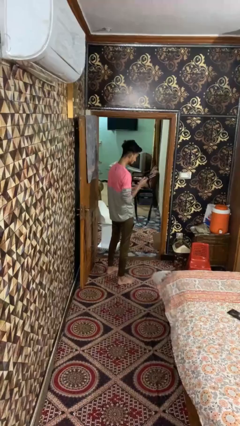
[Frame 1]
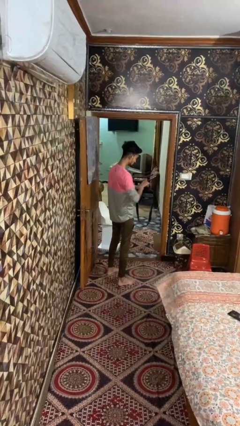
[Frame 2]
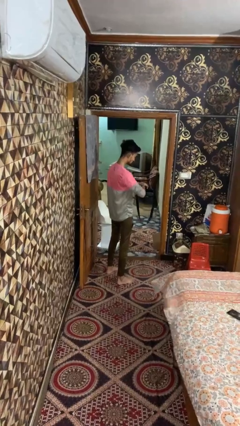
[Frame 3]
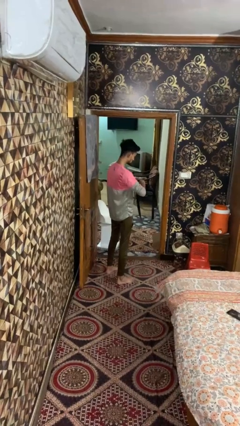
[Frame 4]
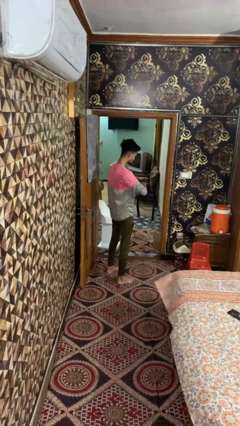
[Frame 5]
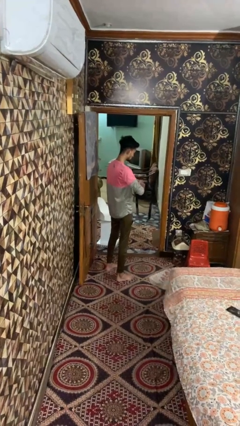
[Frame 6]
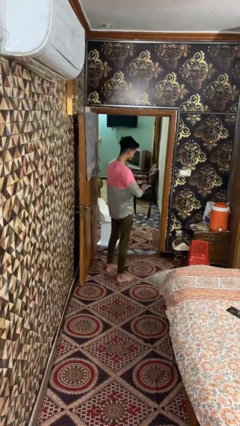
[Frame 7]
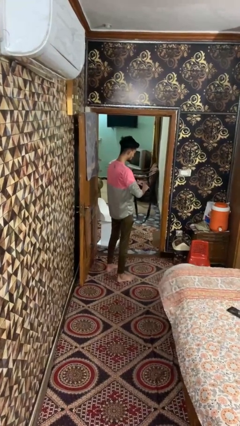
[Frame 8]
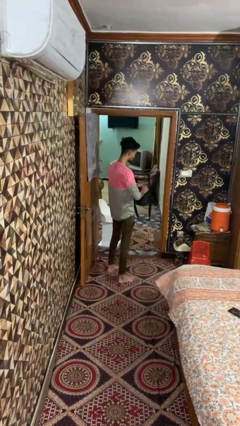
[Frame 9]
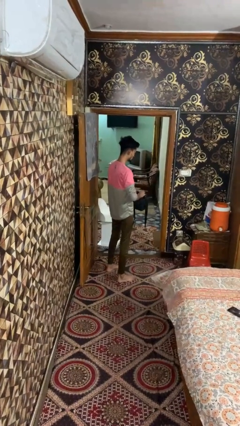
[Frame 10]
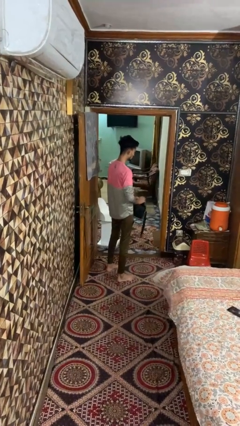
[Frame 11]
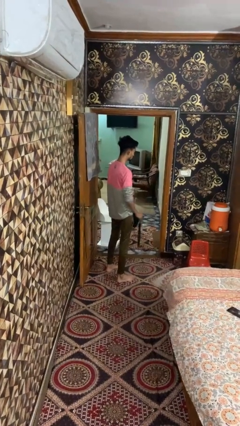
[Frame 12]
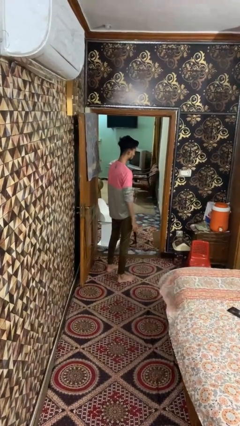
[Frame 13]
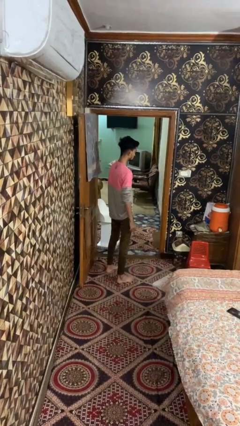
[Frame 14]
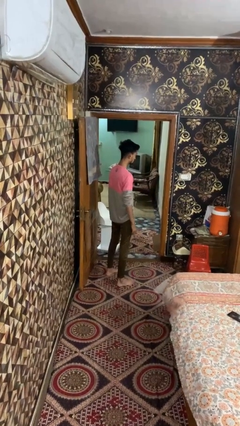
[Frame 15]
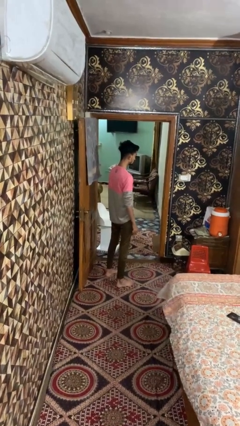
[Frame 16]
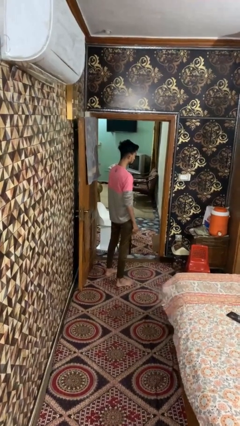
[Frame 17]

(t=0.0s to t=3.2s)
person puts object into bag

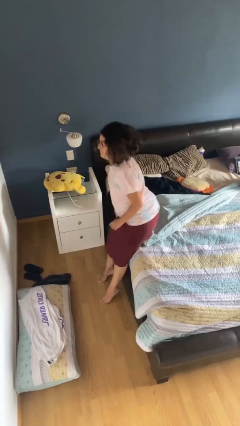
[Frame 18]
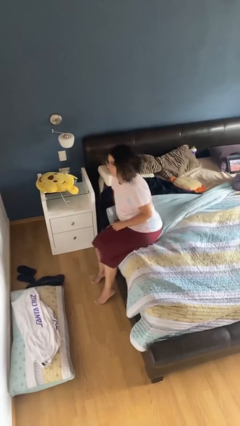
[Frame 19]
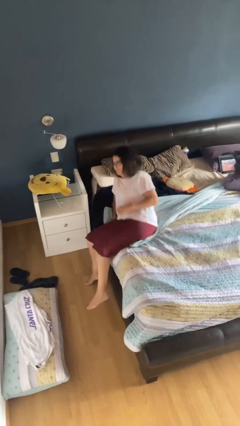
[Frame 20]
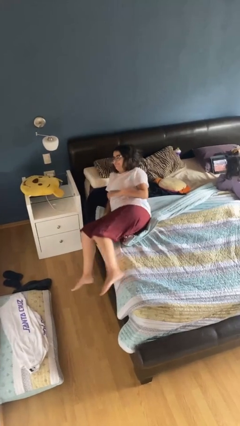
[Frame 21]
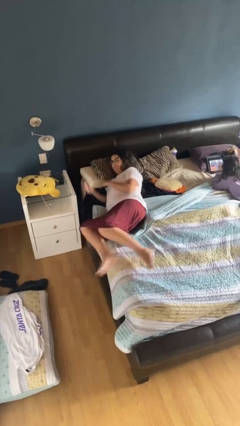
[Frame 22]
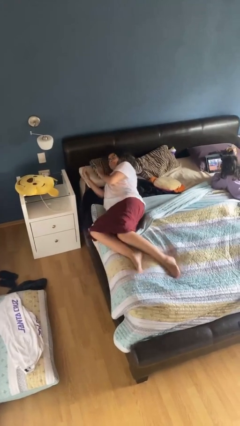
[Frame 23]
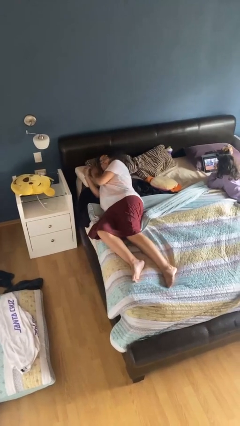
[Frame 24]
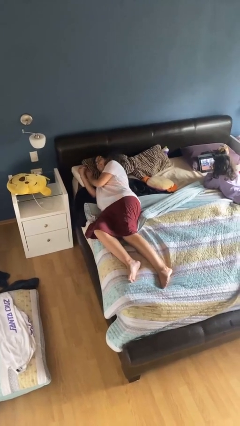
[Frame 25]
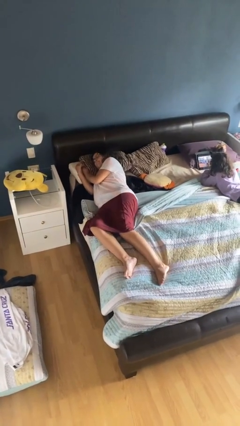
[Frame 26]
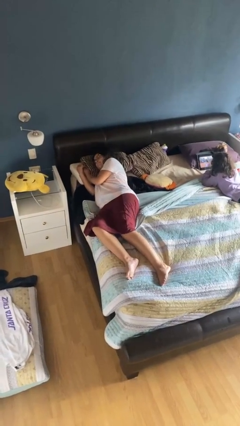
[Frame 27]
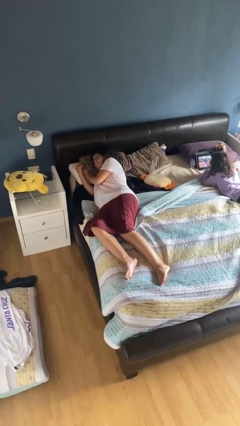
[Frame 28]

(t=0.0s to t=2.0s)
person lies down on bed

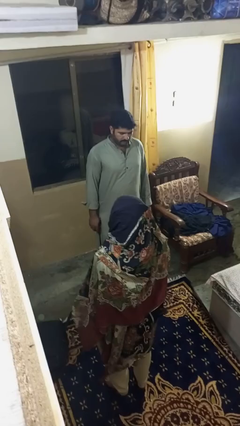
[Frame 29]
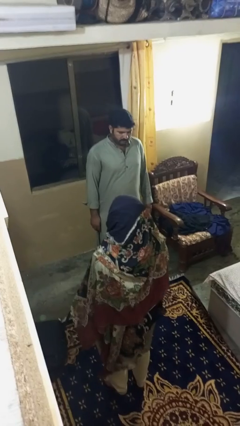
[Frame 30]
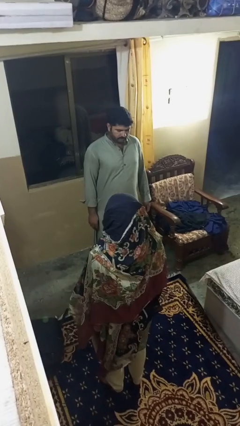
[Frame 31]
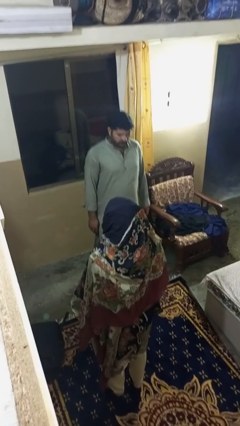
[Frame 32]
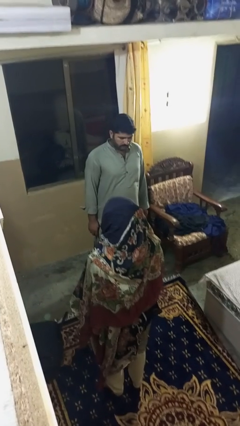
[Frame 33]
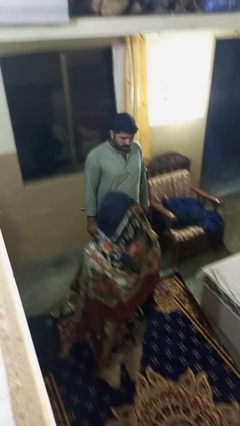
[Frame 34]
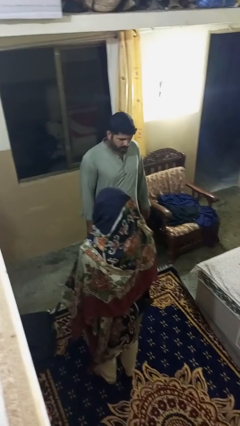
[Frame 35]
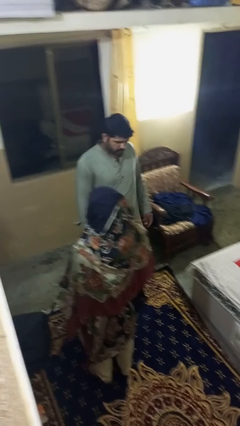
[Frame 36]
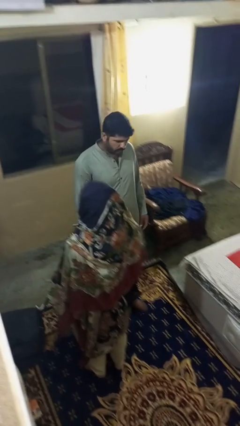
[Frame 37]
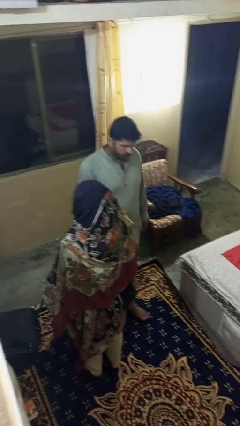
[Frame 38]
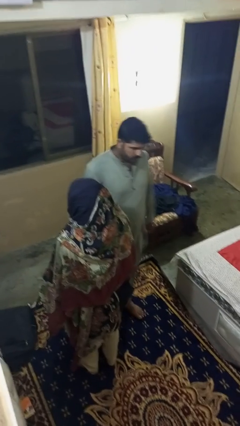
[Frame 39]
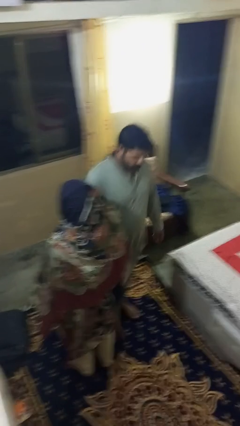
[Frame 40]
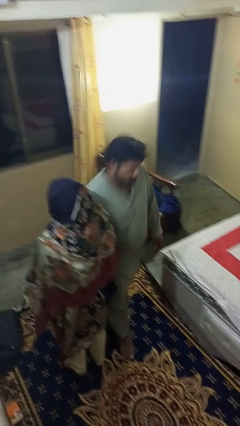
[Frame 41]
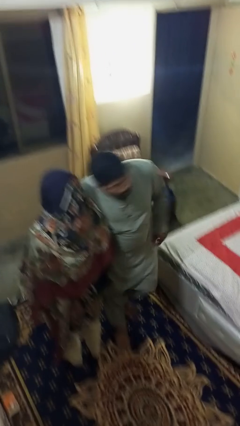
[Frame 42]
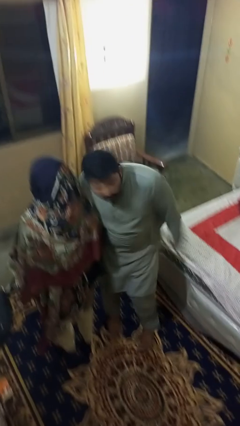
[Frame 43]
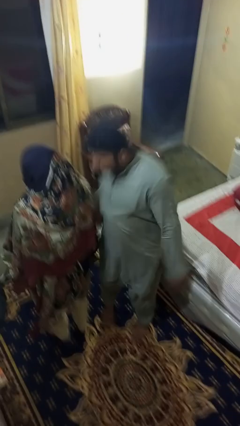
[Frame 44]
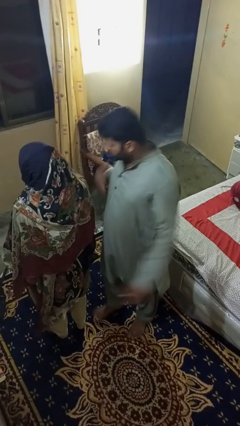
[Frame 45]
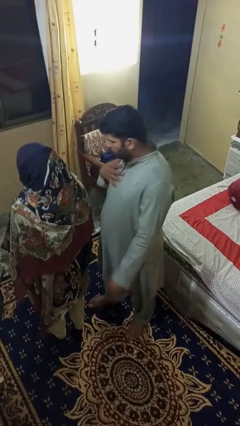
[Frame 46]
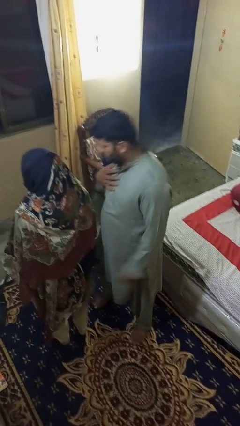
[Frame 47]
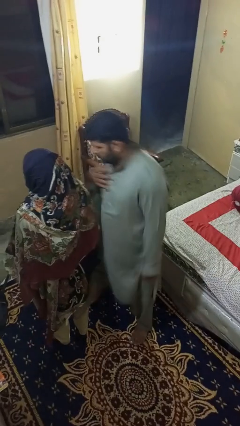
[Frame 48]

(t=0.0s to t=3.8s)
person bumps into person

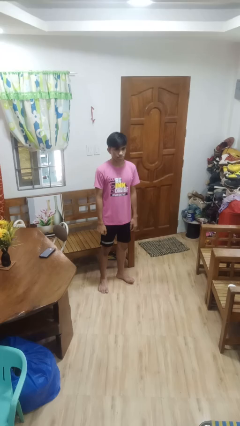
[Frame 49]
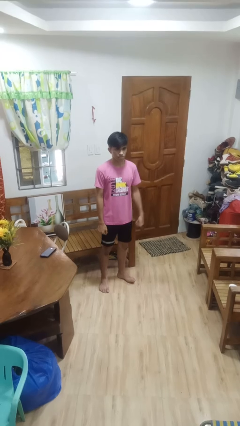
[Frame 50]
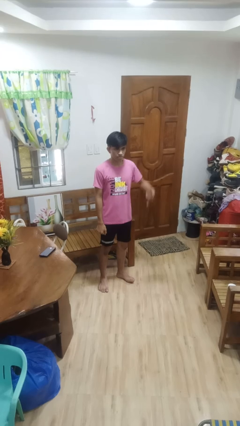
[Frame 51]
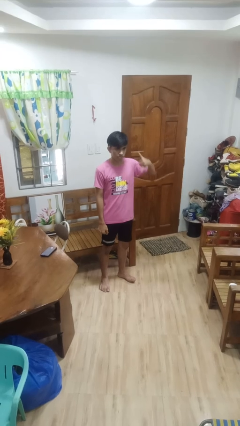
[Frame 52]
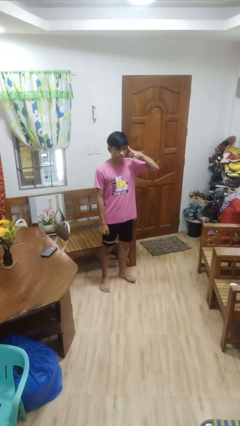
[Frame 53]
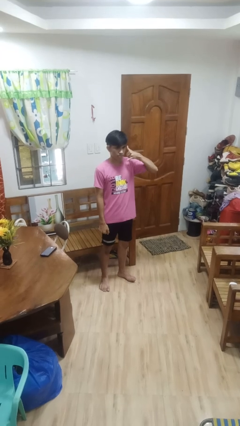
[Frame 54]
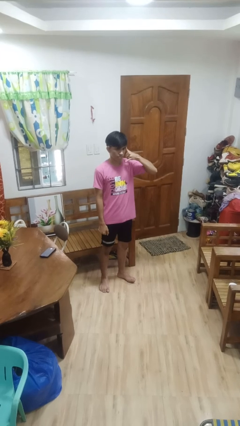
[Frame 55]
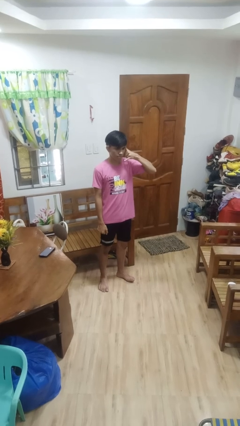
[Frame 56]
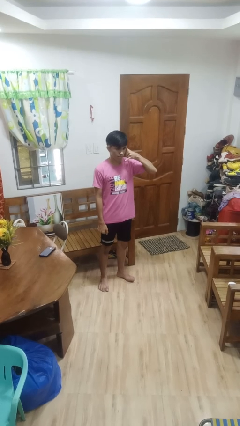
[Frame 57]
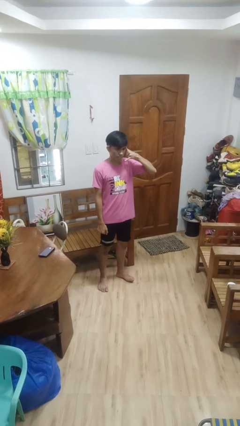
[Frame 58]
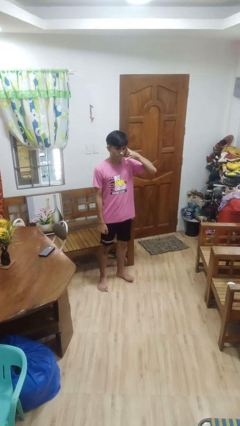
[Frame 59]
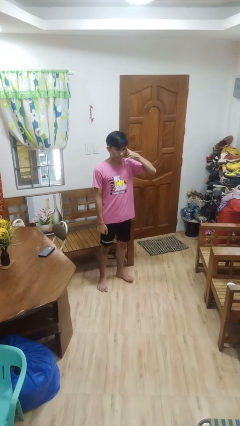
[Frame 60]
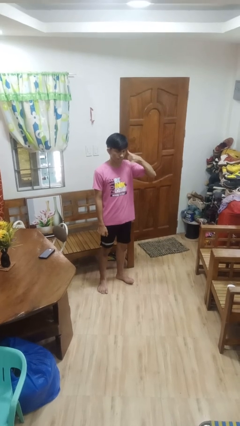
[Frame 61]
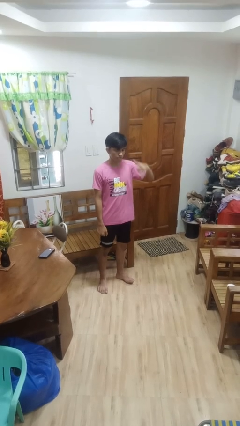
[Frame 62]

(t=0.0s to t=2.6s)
person gestures call me

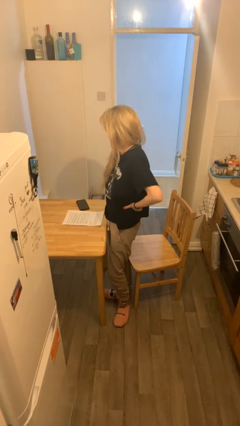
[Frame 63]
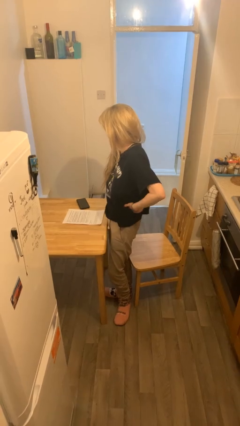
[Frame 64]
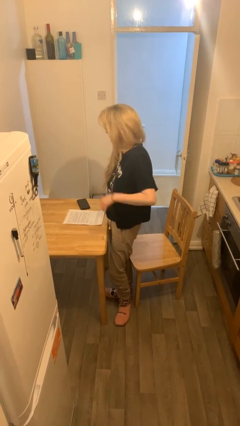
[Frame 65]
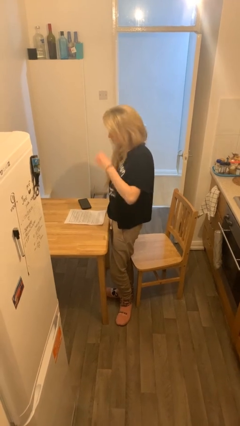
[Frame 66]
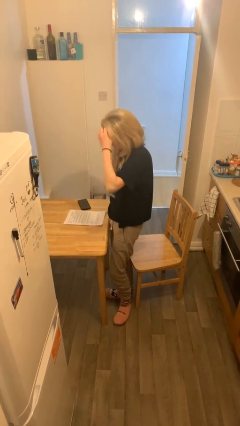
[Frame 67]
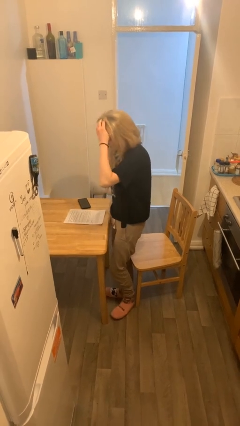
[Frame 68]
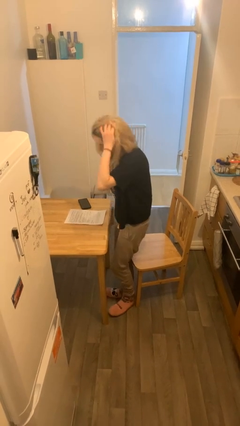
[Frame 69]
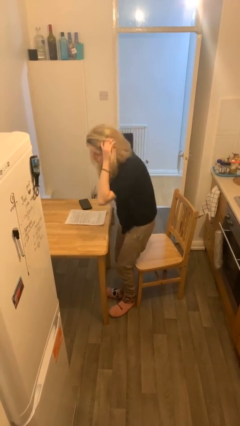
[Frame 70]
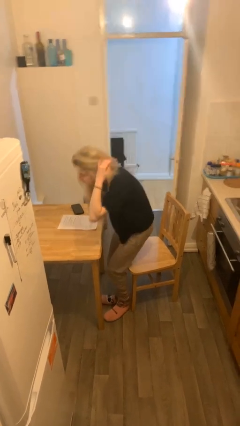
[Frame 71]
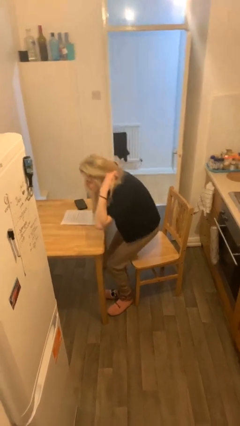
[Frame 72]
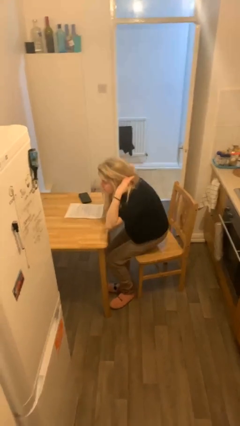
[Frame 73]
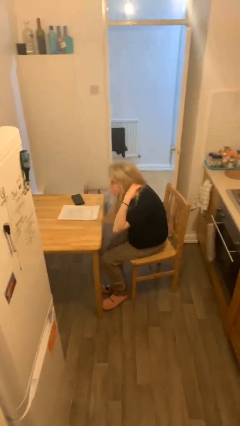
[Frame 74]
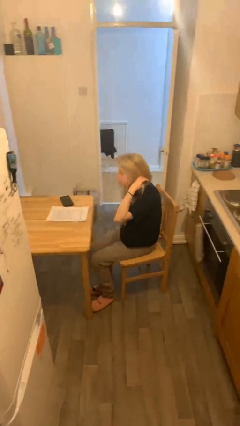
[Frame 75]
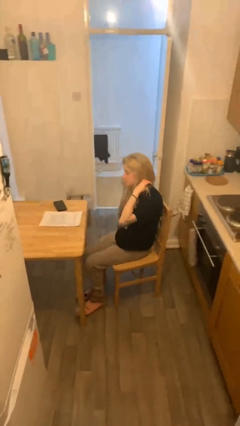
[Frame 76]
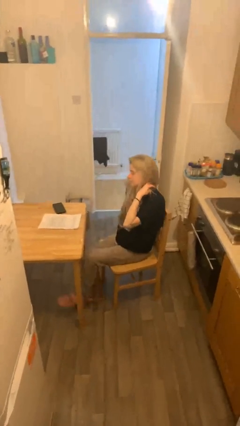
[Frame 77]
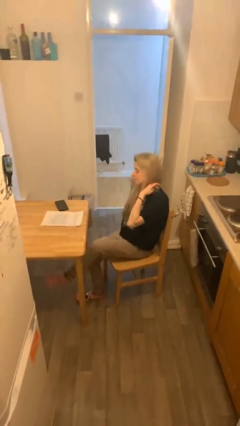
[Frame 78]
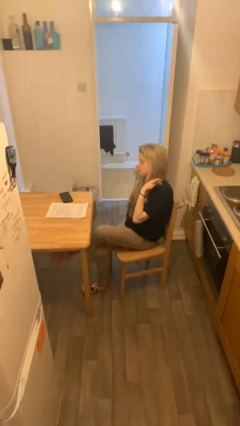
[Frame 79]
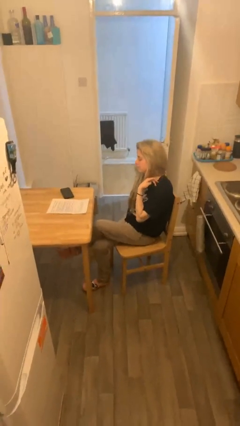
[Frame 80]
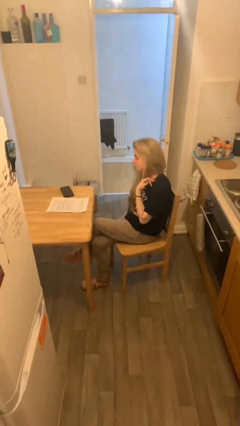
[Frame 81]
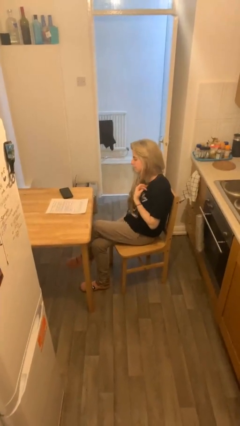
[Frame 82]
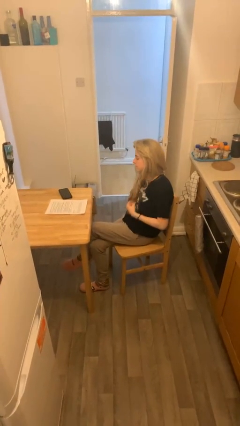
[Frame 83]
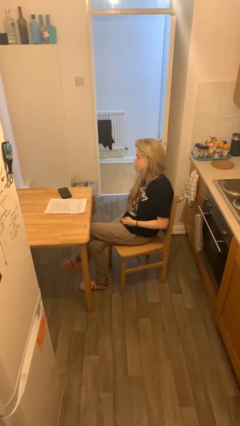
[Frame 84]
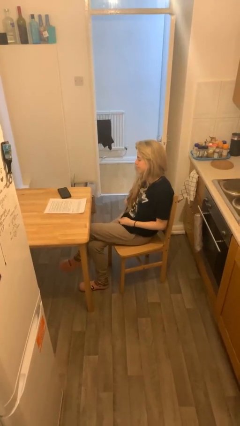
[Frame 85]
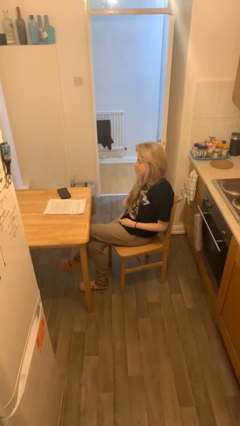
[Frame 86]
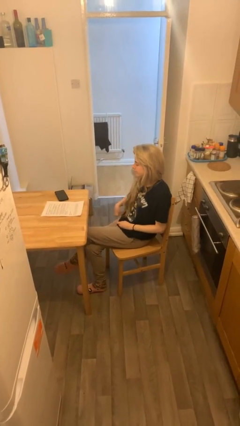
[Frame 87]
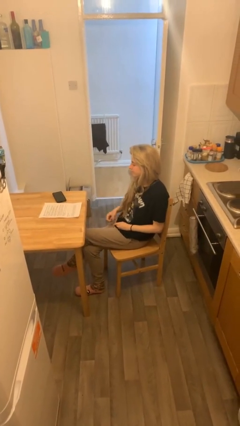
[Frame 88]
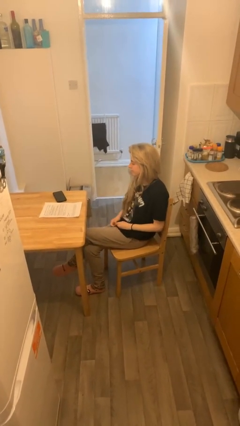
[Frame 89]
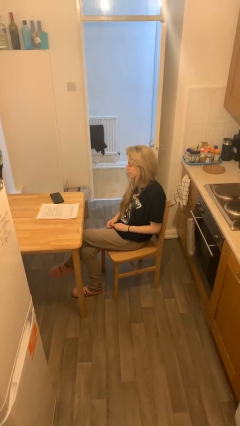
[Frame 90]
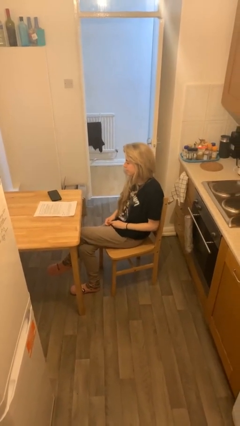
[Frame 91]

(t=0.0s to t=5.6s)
person sits down

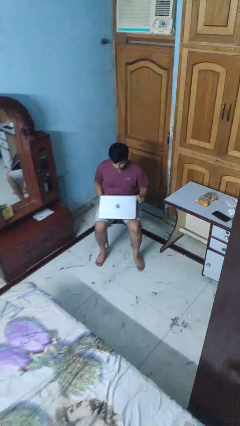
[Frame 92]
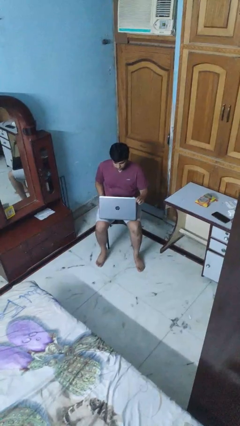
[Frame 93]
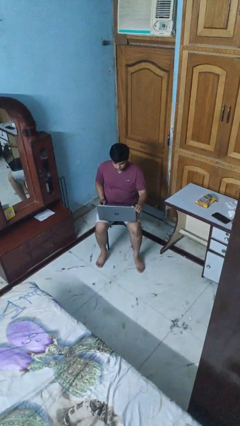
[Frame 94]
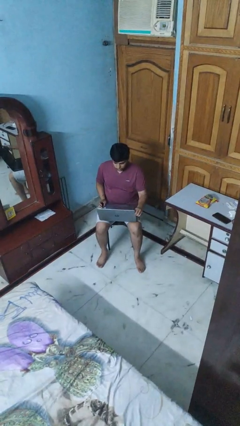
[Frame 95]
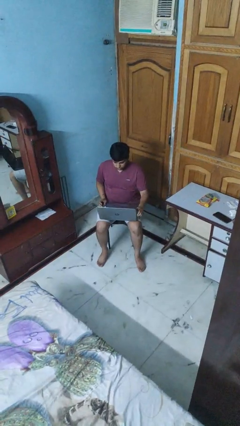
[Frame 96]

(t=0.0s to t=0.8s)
person opens laptop
